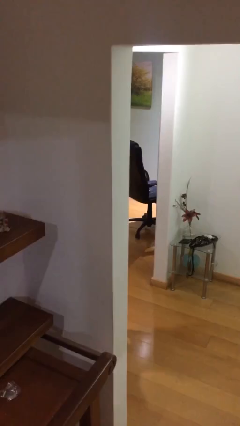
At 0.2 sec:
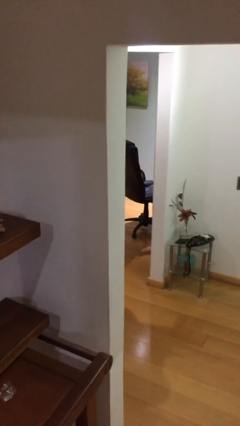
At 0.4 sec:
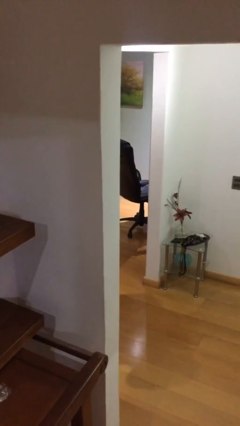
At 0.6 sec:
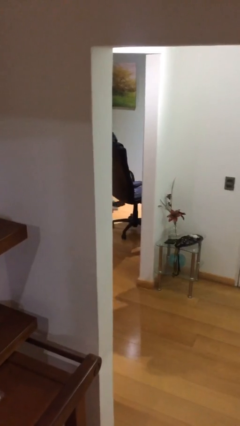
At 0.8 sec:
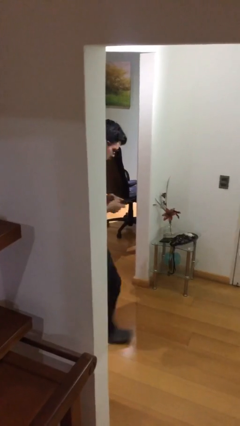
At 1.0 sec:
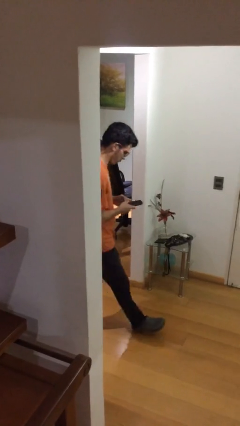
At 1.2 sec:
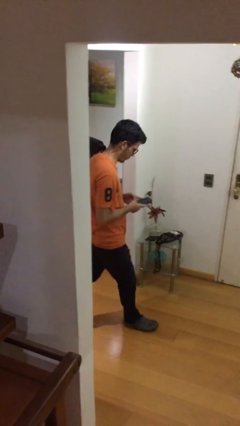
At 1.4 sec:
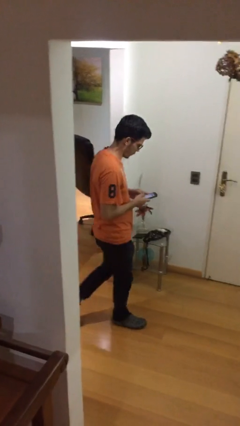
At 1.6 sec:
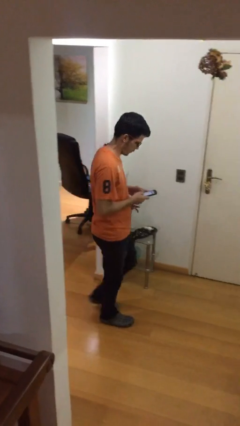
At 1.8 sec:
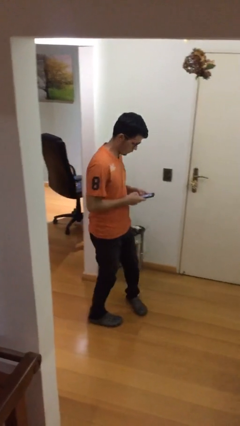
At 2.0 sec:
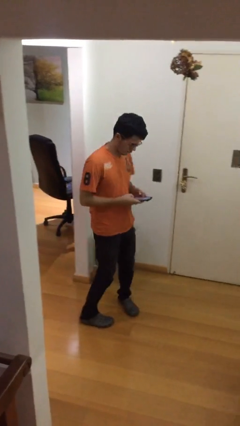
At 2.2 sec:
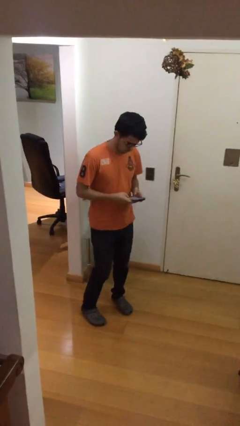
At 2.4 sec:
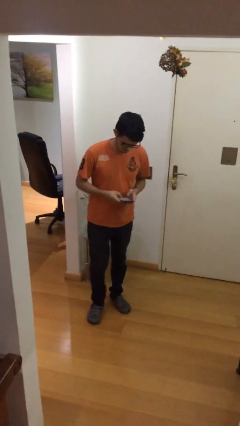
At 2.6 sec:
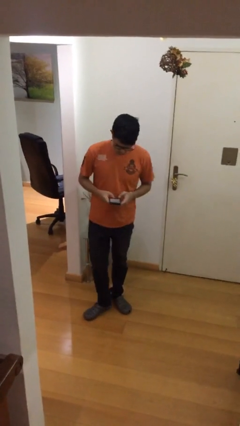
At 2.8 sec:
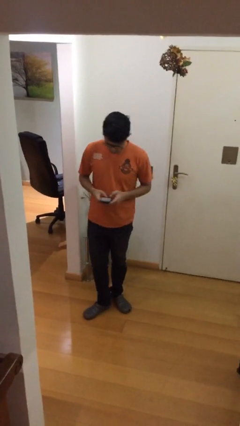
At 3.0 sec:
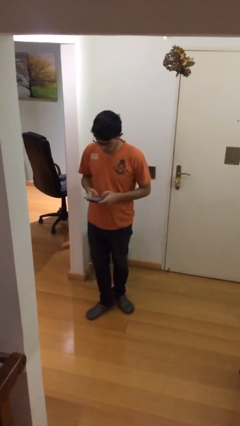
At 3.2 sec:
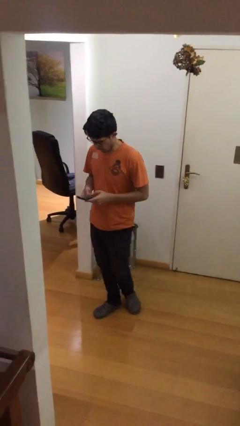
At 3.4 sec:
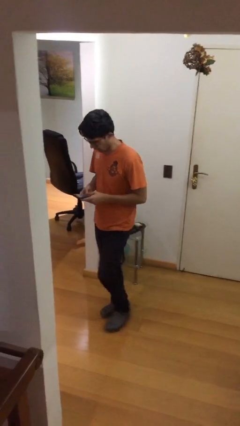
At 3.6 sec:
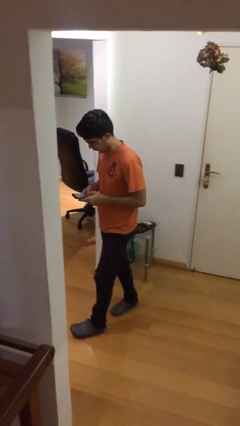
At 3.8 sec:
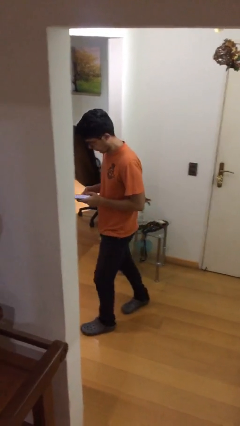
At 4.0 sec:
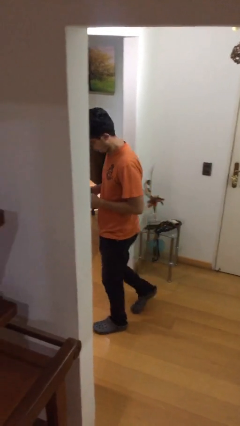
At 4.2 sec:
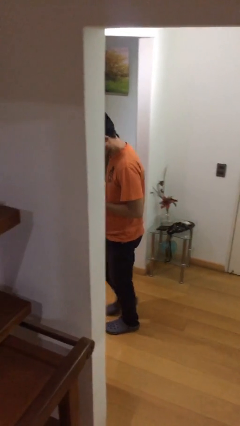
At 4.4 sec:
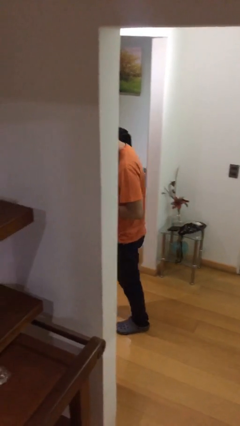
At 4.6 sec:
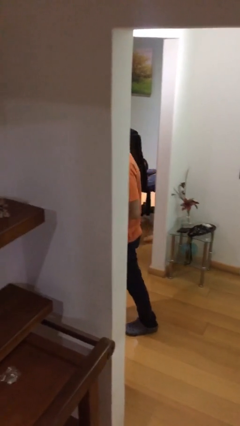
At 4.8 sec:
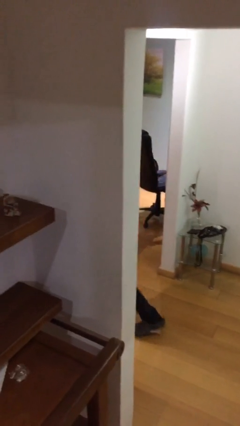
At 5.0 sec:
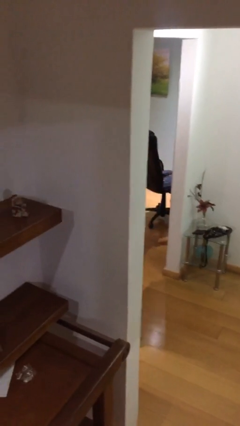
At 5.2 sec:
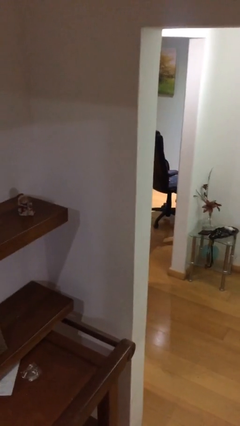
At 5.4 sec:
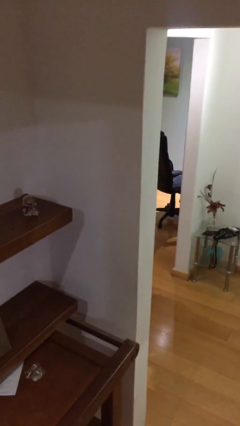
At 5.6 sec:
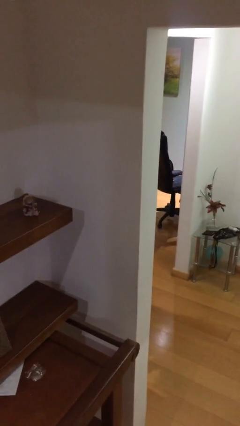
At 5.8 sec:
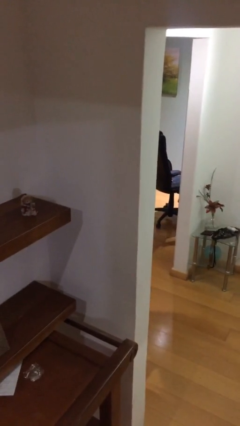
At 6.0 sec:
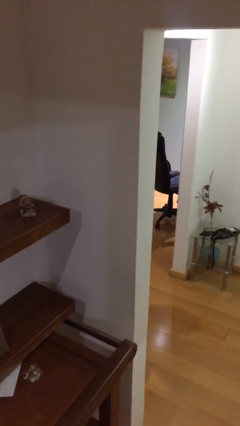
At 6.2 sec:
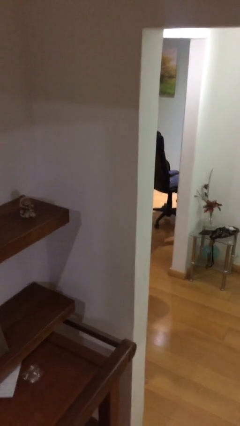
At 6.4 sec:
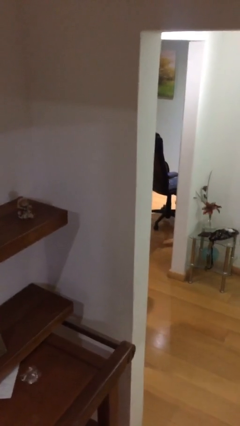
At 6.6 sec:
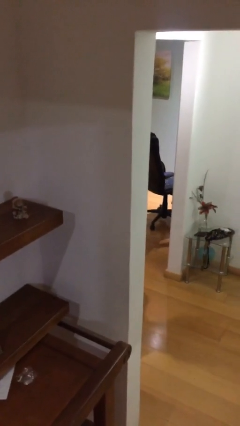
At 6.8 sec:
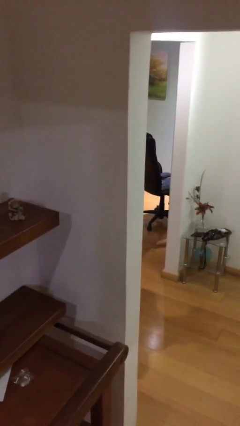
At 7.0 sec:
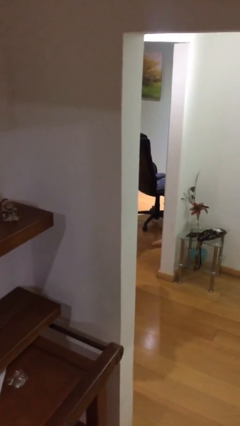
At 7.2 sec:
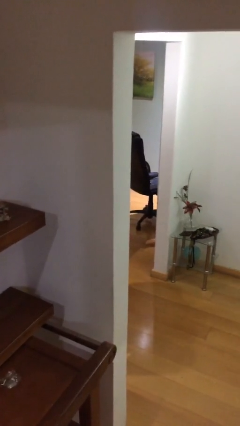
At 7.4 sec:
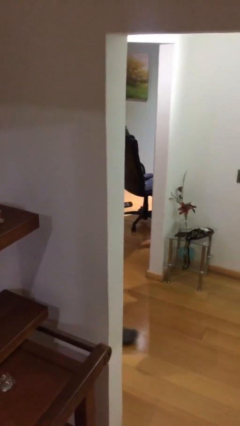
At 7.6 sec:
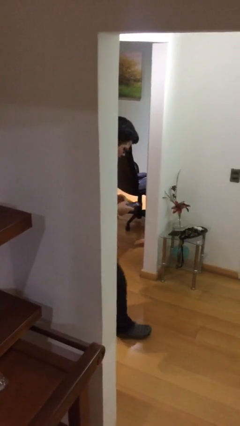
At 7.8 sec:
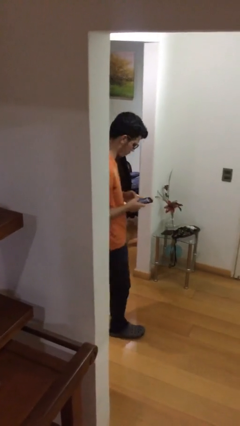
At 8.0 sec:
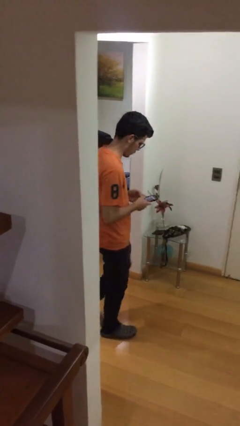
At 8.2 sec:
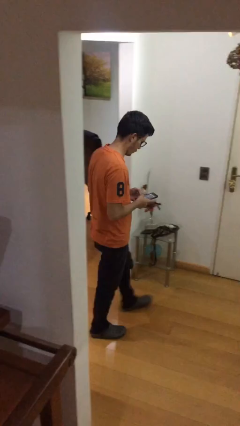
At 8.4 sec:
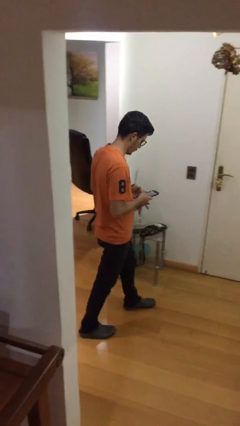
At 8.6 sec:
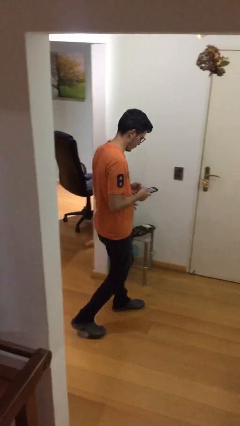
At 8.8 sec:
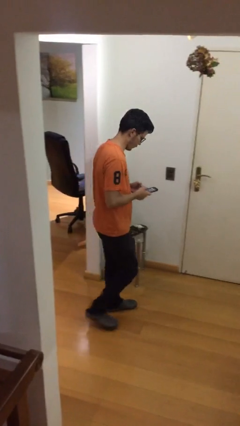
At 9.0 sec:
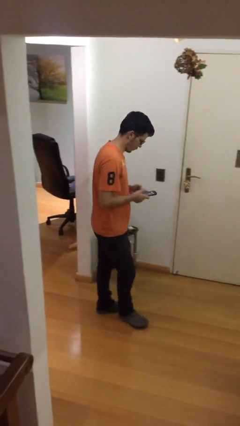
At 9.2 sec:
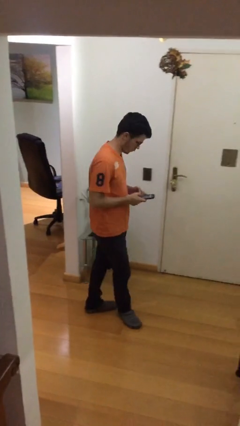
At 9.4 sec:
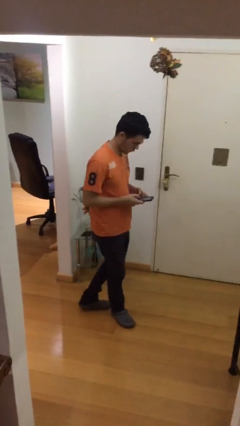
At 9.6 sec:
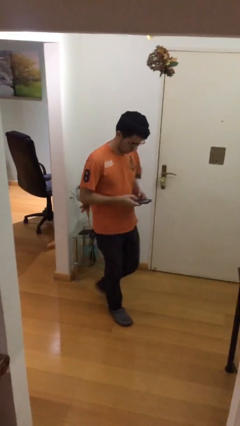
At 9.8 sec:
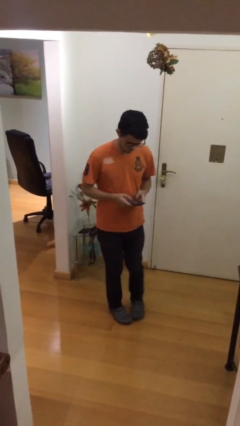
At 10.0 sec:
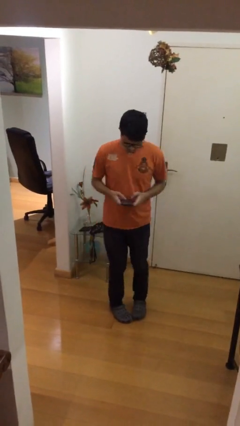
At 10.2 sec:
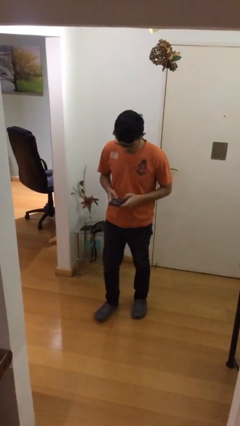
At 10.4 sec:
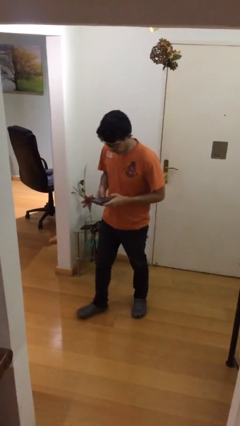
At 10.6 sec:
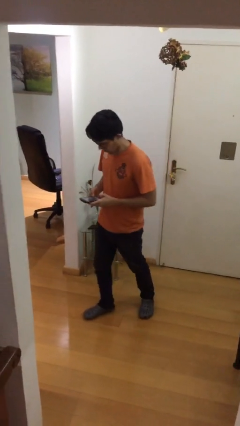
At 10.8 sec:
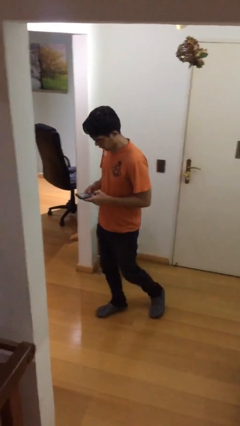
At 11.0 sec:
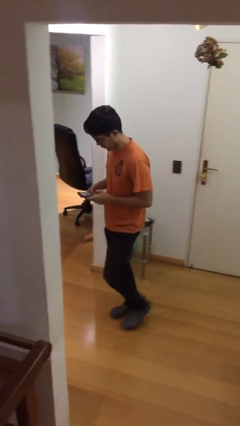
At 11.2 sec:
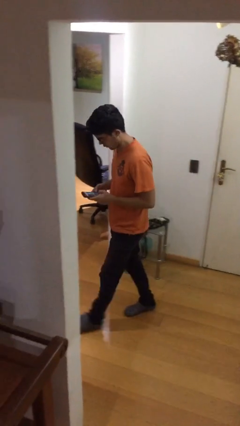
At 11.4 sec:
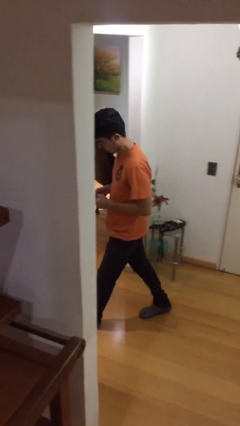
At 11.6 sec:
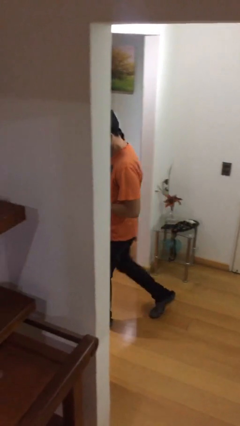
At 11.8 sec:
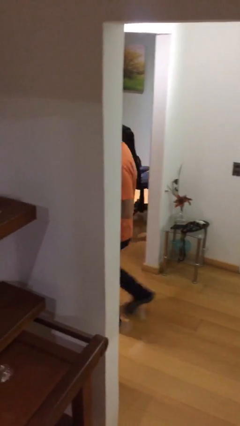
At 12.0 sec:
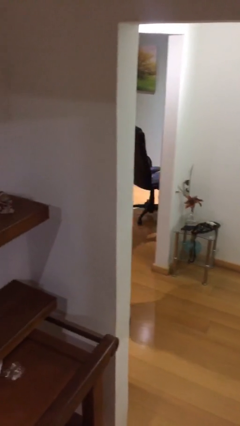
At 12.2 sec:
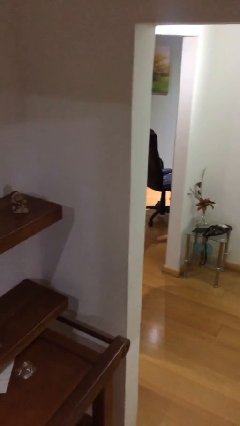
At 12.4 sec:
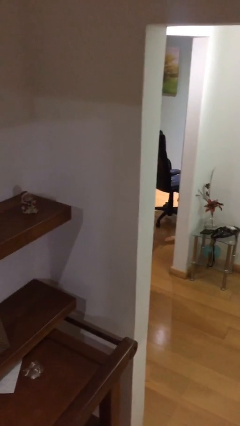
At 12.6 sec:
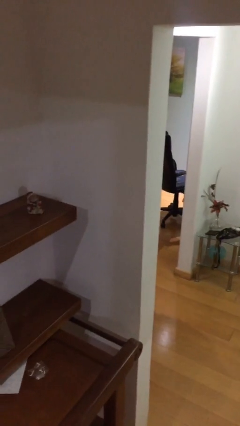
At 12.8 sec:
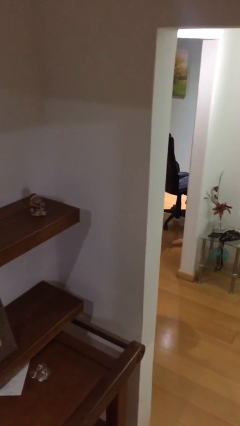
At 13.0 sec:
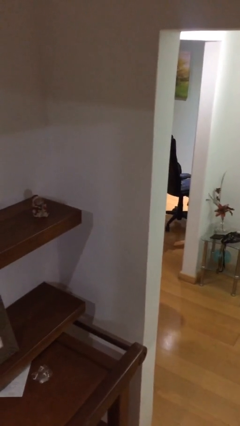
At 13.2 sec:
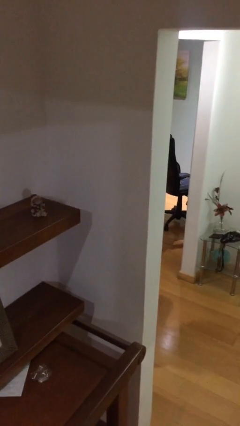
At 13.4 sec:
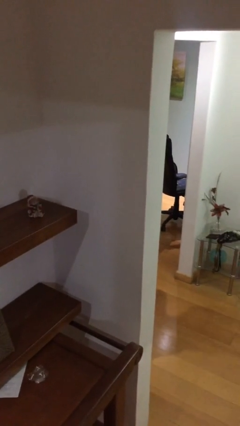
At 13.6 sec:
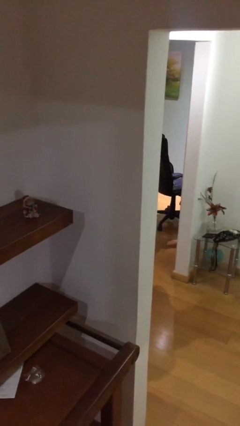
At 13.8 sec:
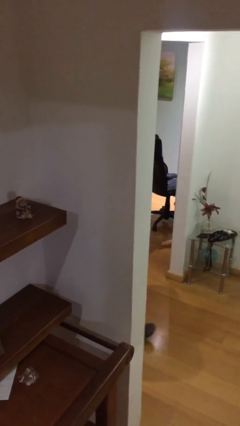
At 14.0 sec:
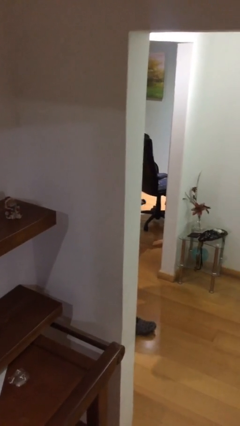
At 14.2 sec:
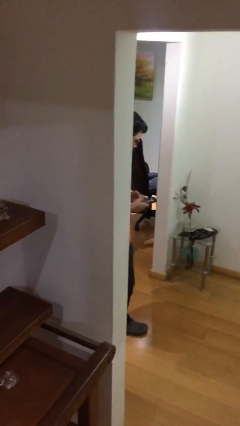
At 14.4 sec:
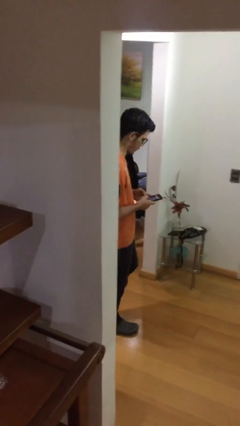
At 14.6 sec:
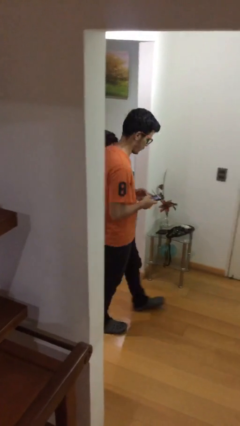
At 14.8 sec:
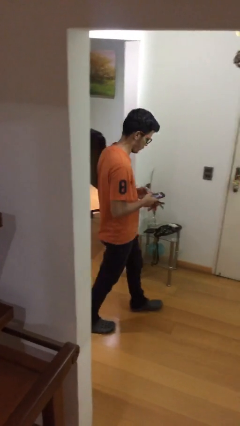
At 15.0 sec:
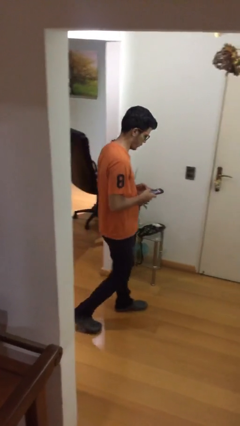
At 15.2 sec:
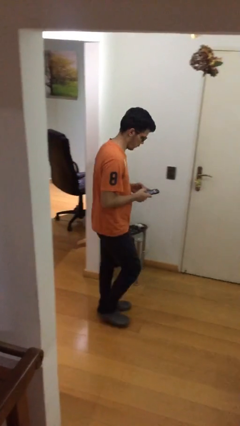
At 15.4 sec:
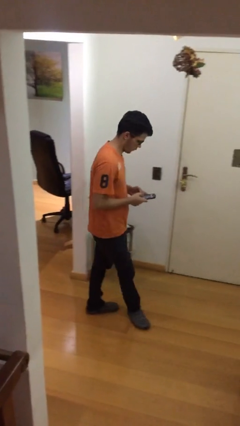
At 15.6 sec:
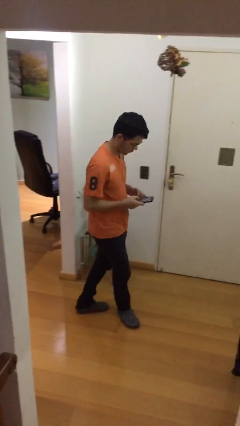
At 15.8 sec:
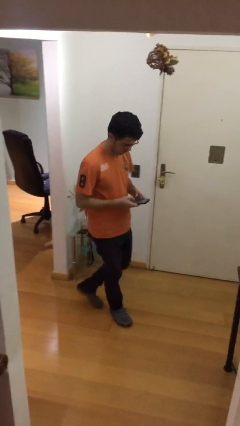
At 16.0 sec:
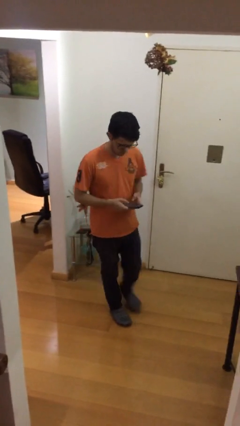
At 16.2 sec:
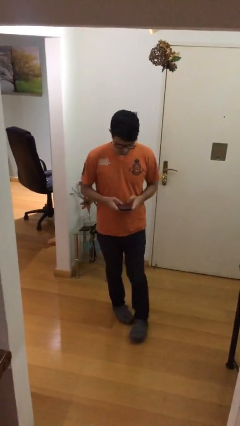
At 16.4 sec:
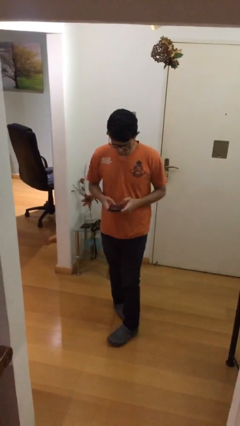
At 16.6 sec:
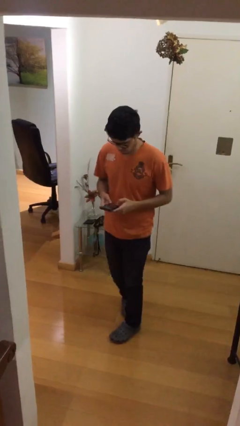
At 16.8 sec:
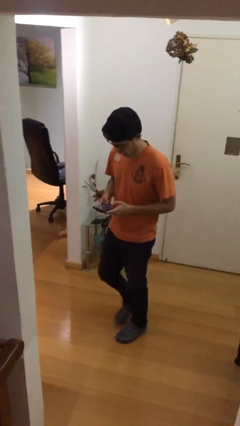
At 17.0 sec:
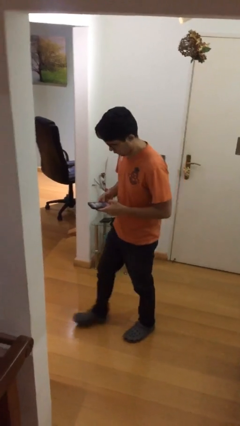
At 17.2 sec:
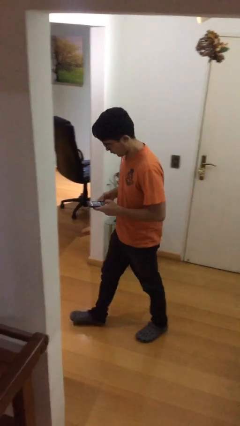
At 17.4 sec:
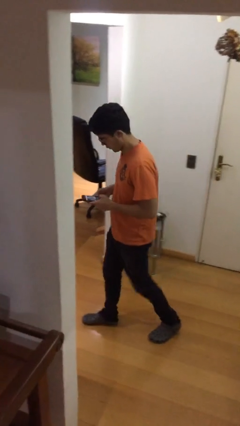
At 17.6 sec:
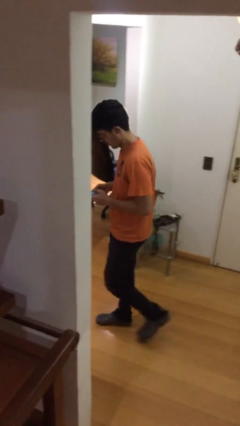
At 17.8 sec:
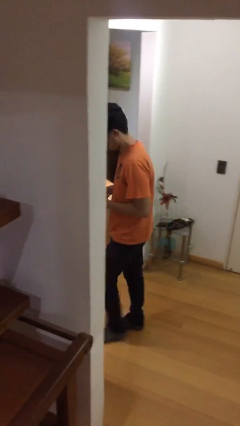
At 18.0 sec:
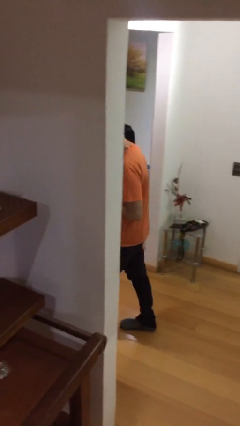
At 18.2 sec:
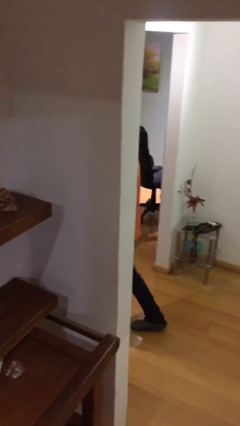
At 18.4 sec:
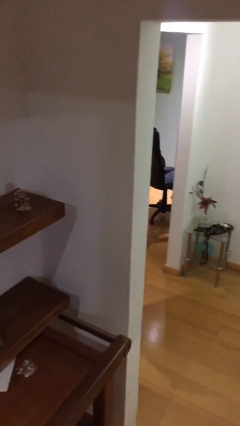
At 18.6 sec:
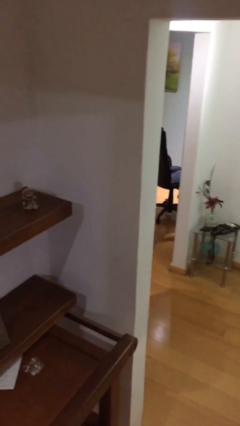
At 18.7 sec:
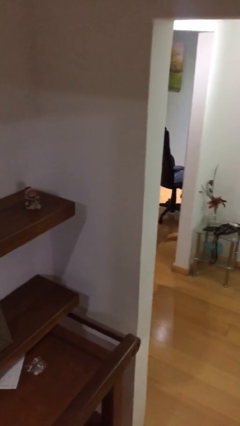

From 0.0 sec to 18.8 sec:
person texts on phone
